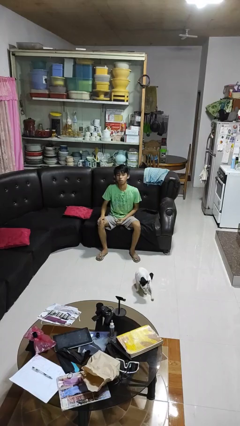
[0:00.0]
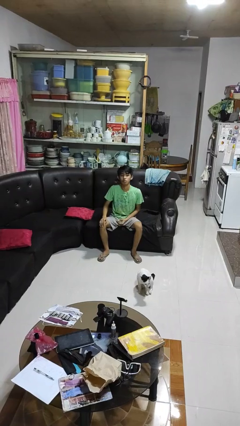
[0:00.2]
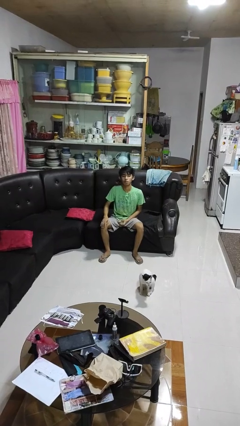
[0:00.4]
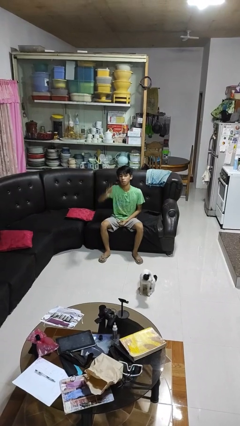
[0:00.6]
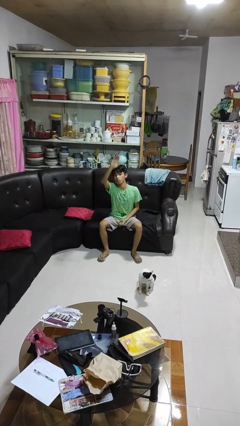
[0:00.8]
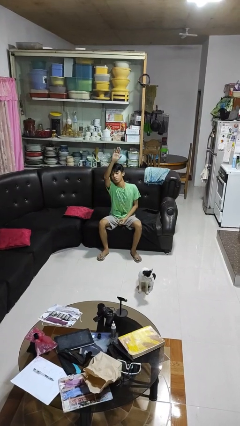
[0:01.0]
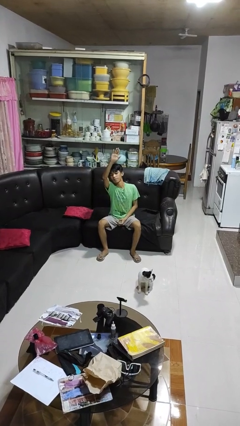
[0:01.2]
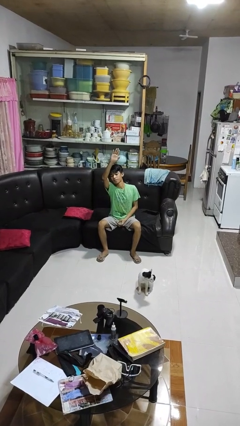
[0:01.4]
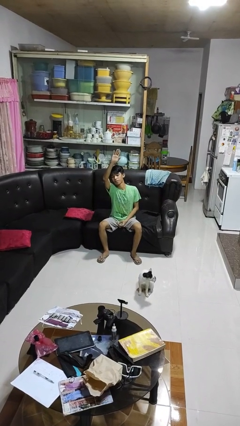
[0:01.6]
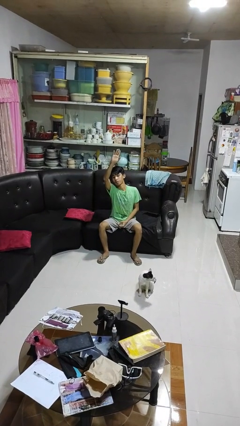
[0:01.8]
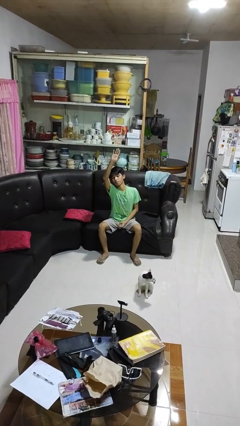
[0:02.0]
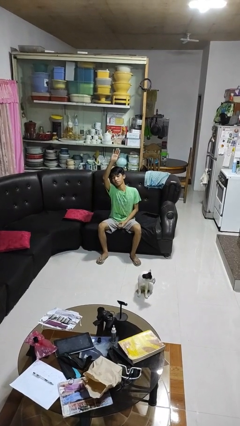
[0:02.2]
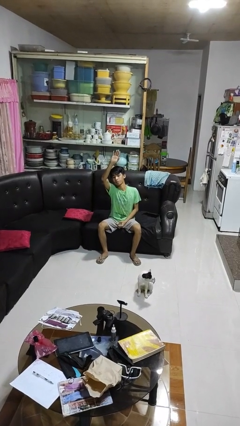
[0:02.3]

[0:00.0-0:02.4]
person gestures raise hand

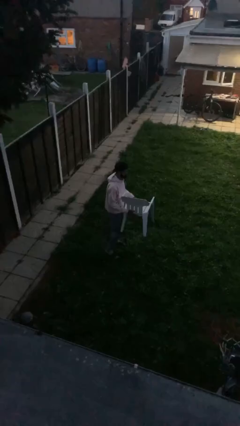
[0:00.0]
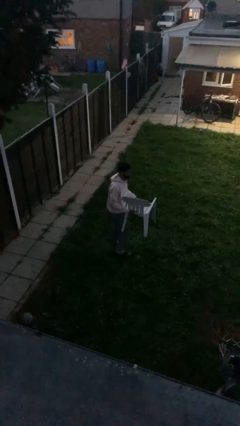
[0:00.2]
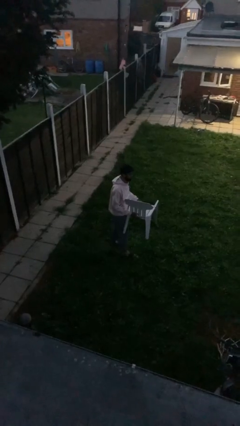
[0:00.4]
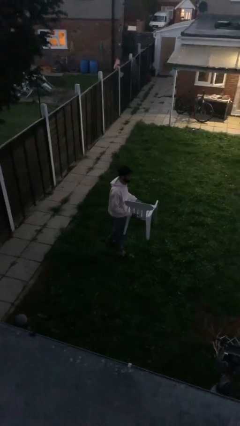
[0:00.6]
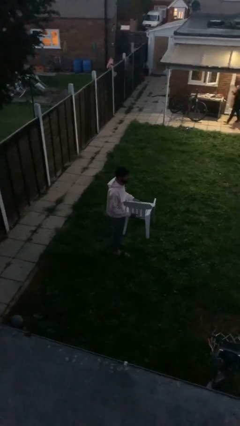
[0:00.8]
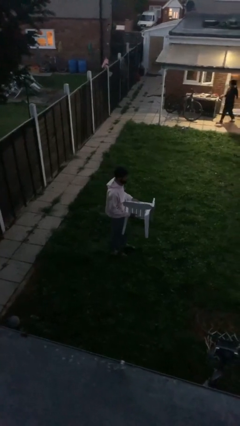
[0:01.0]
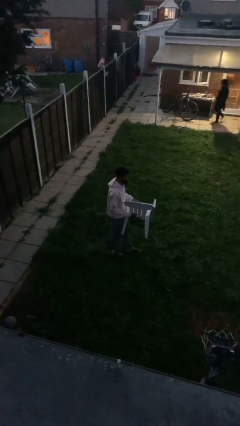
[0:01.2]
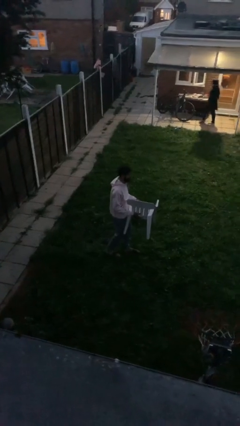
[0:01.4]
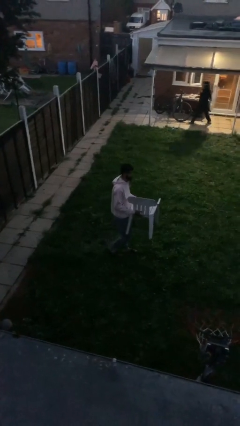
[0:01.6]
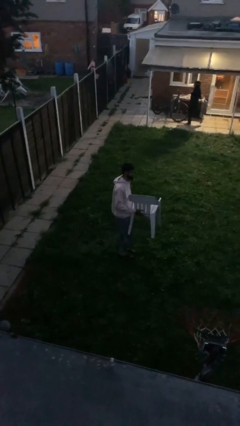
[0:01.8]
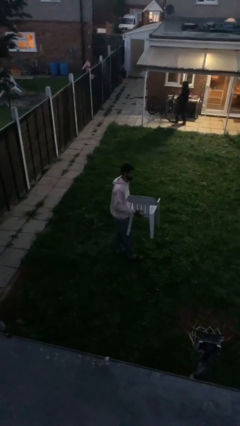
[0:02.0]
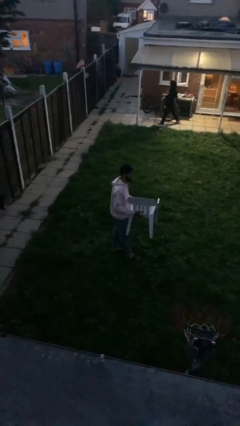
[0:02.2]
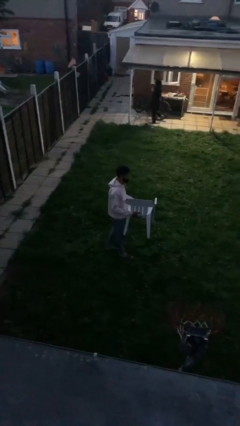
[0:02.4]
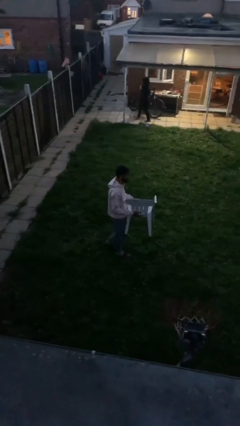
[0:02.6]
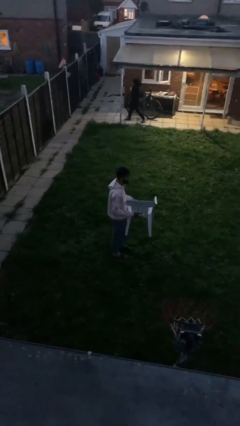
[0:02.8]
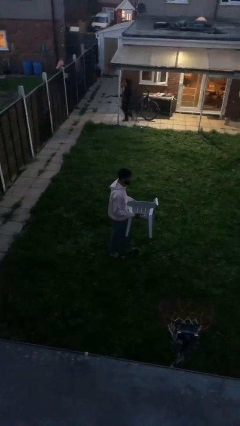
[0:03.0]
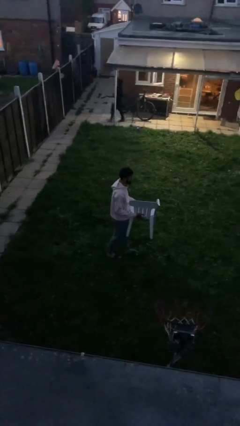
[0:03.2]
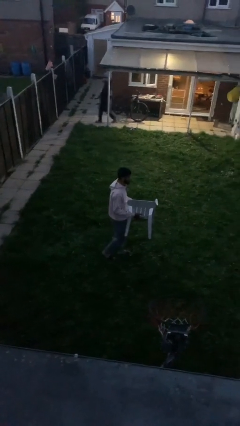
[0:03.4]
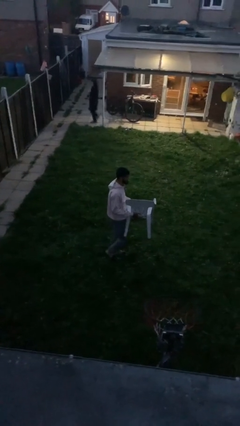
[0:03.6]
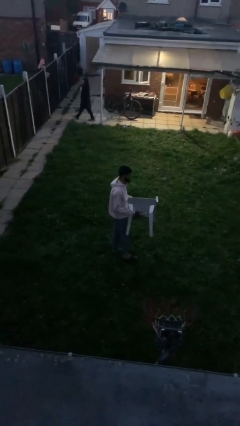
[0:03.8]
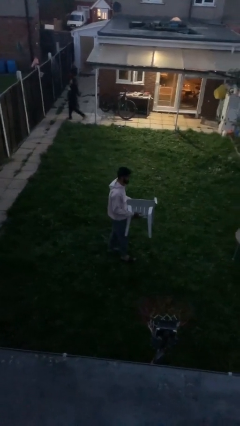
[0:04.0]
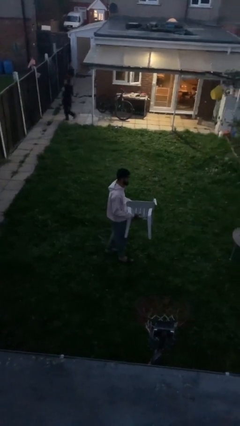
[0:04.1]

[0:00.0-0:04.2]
person carries heavy object

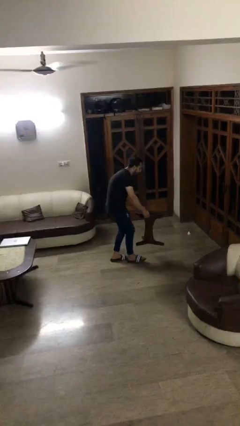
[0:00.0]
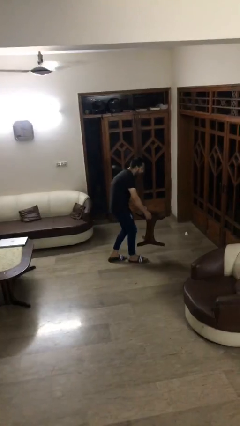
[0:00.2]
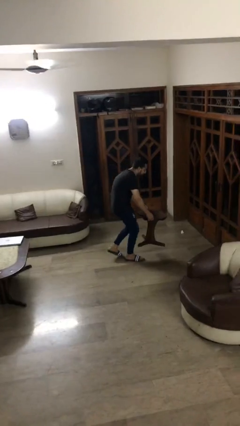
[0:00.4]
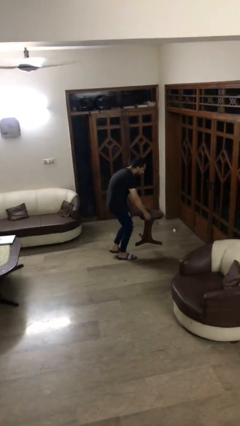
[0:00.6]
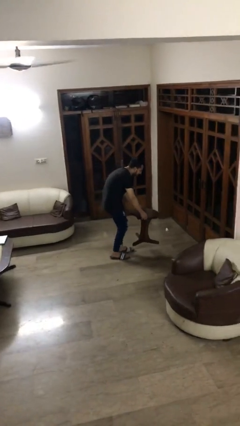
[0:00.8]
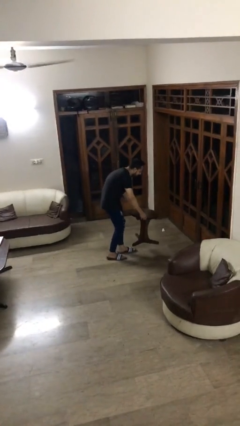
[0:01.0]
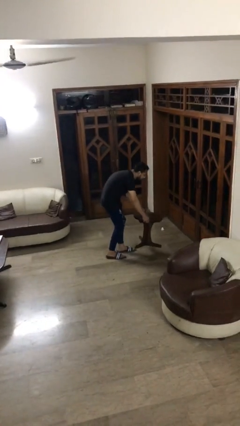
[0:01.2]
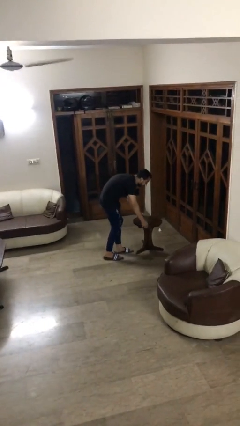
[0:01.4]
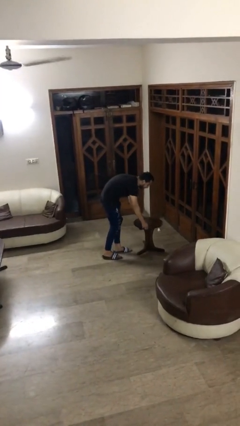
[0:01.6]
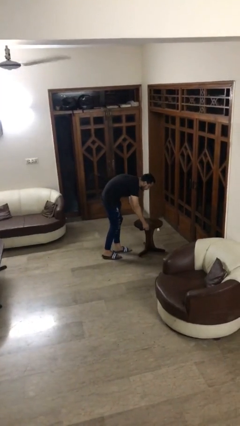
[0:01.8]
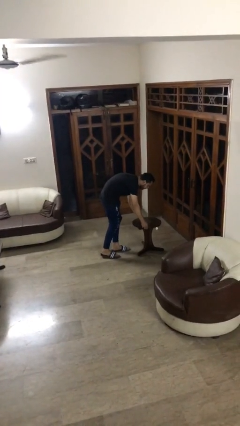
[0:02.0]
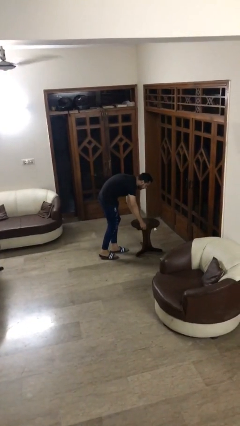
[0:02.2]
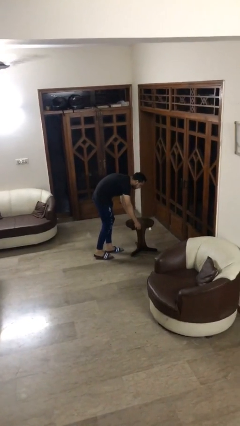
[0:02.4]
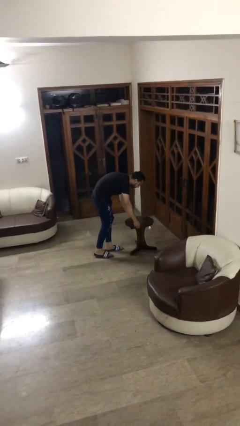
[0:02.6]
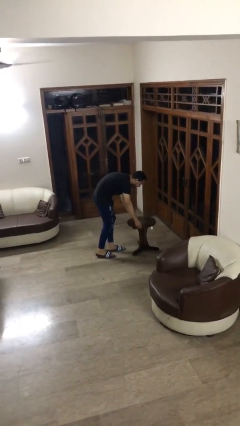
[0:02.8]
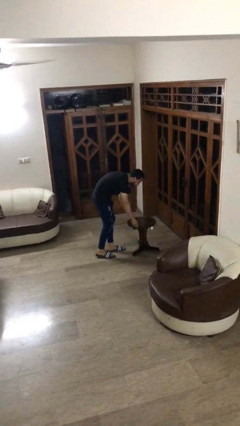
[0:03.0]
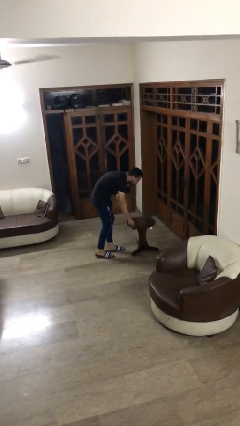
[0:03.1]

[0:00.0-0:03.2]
person puts down object on floor

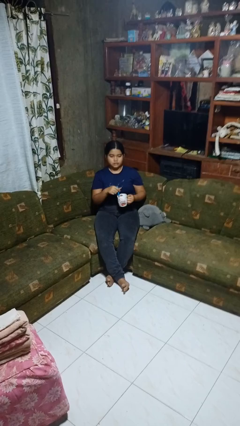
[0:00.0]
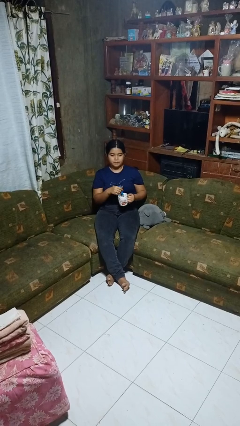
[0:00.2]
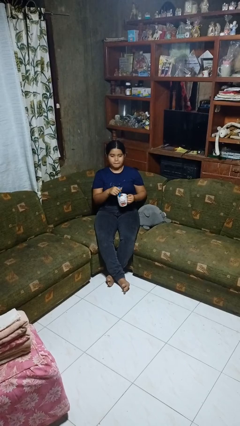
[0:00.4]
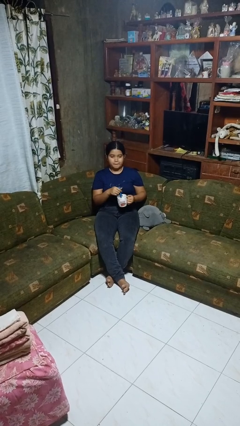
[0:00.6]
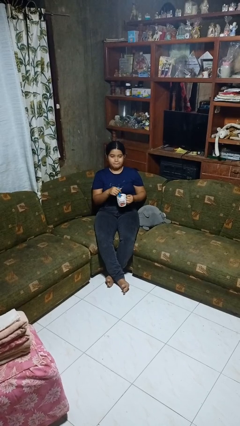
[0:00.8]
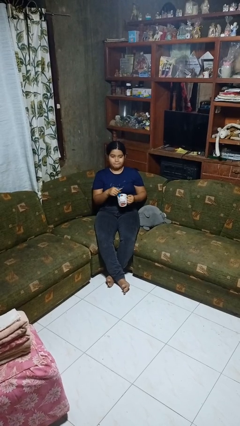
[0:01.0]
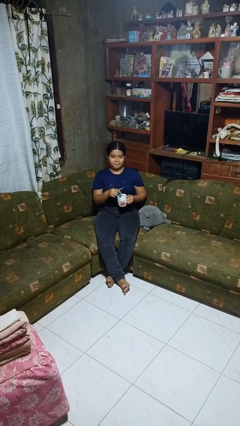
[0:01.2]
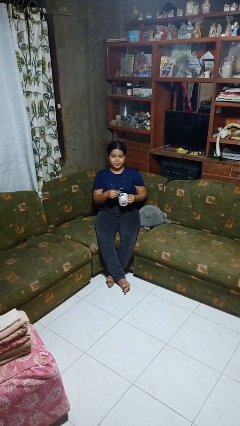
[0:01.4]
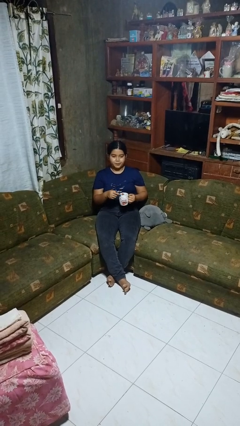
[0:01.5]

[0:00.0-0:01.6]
person stirs mug

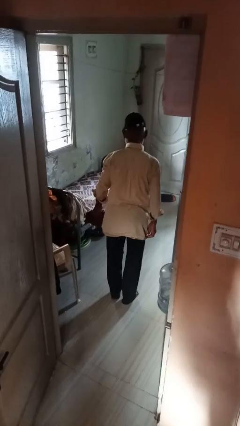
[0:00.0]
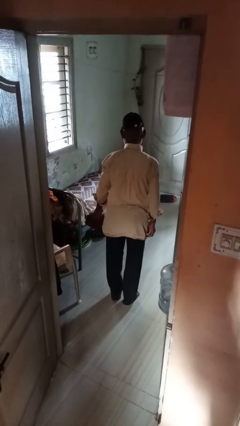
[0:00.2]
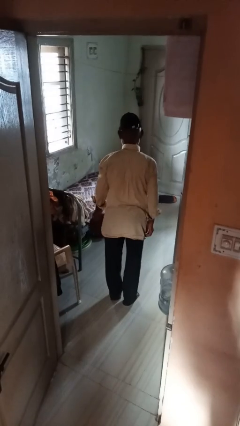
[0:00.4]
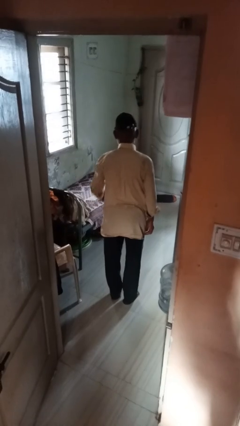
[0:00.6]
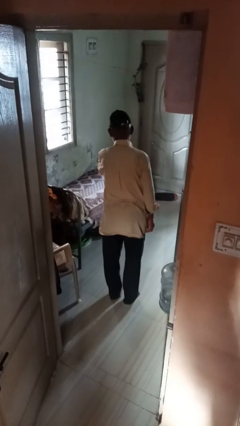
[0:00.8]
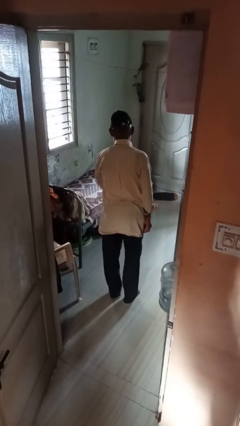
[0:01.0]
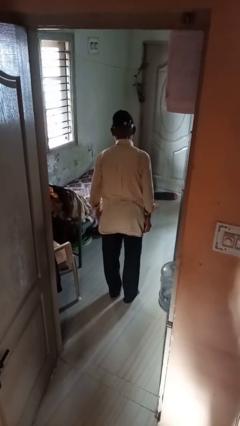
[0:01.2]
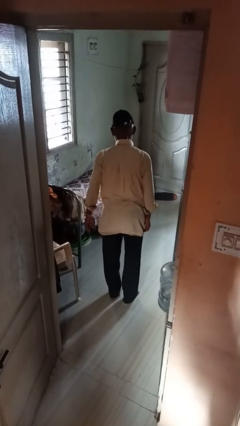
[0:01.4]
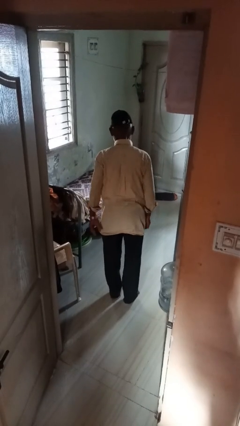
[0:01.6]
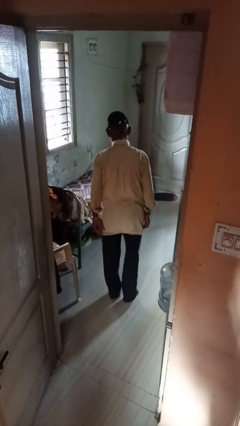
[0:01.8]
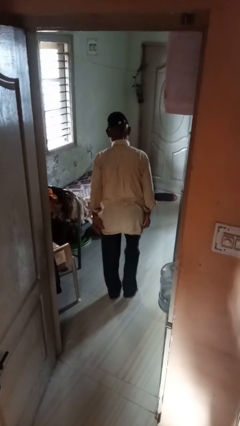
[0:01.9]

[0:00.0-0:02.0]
person throws object on bed

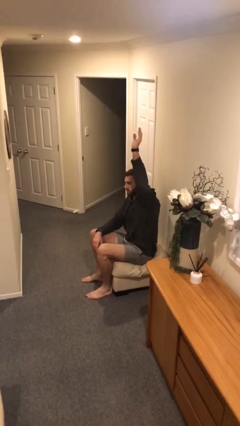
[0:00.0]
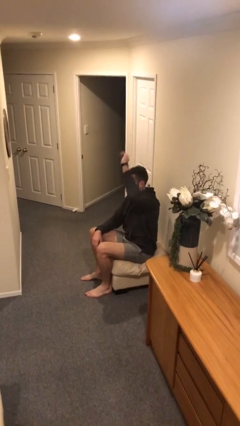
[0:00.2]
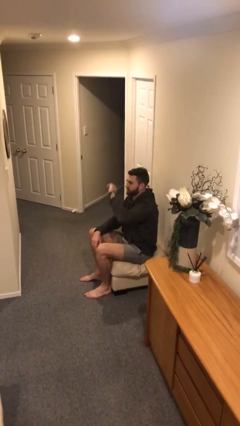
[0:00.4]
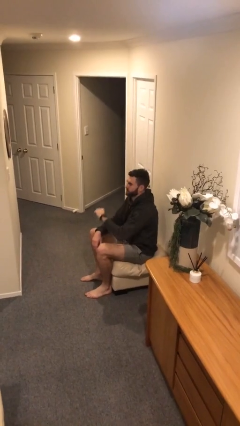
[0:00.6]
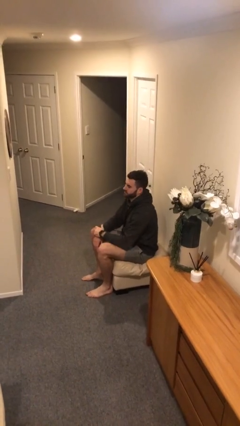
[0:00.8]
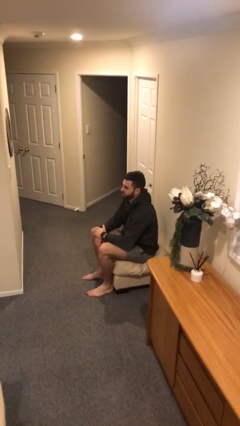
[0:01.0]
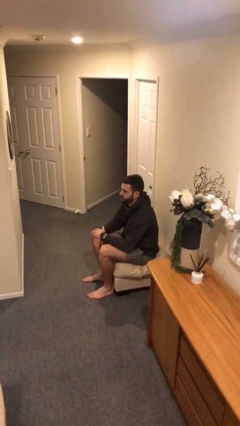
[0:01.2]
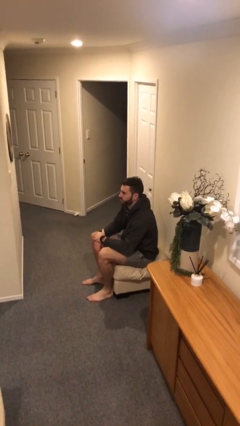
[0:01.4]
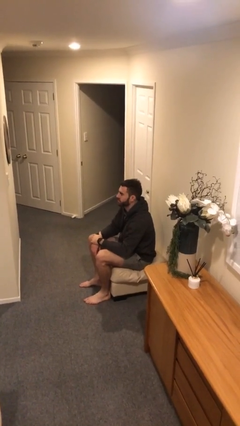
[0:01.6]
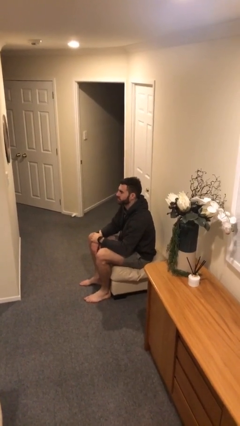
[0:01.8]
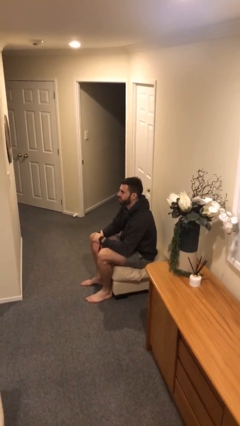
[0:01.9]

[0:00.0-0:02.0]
person gestures lower hand

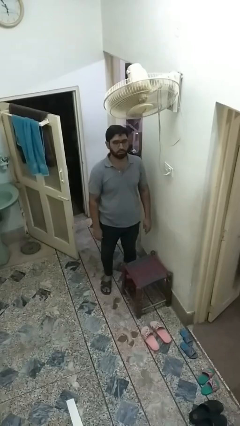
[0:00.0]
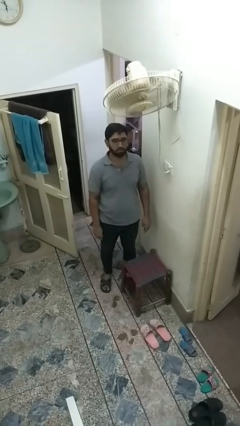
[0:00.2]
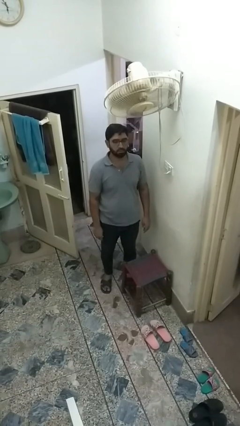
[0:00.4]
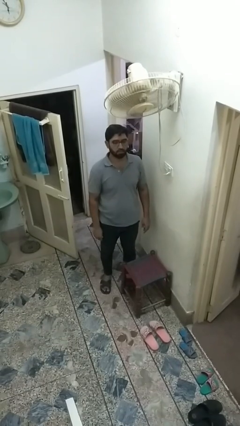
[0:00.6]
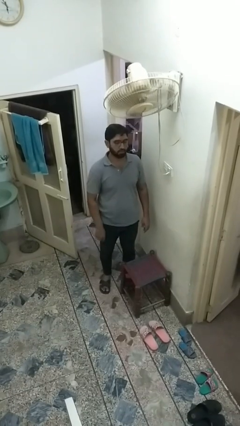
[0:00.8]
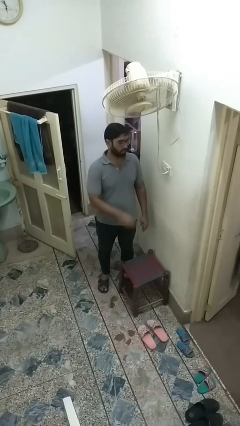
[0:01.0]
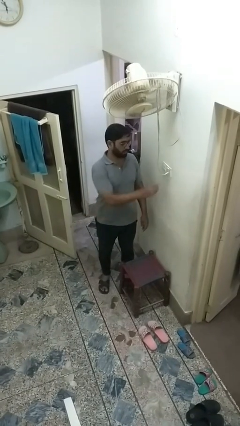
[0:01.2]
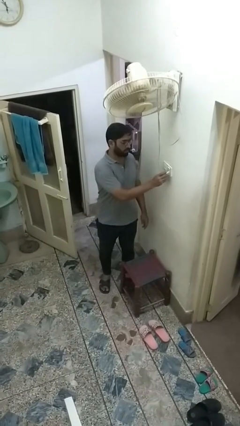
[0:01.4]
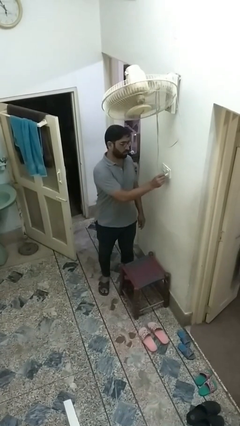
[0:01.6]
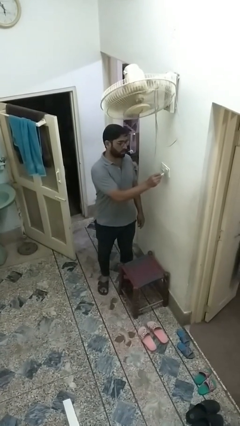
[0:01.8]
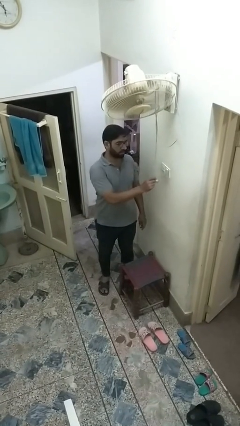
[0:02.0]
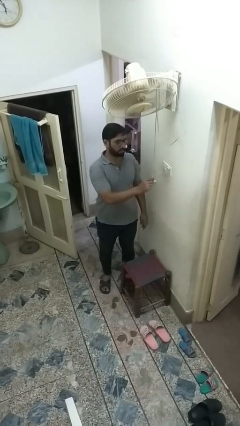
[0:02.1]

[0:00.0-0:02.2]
person unplugs from electrical socket
